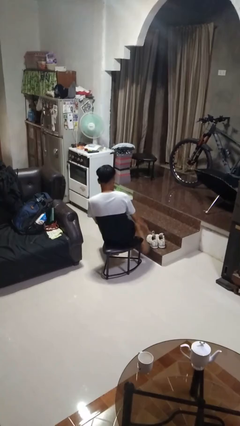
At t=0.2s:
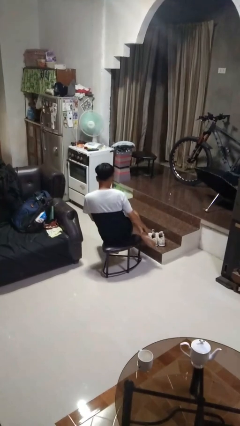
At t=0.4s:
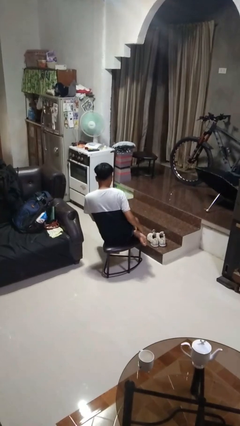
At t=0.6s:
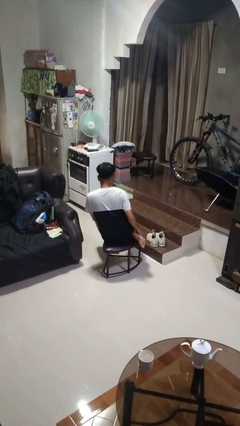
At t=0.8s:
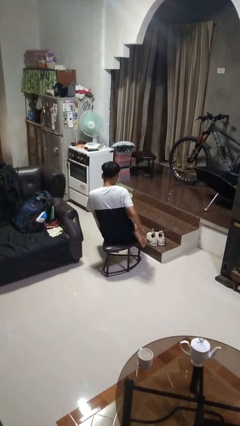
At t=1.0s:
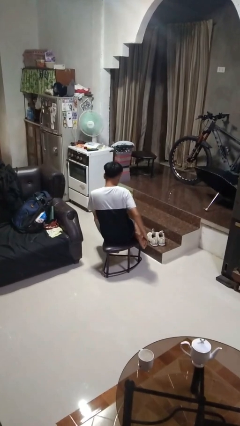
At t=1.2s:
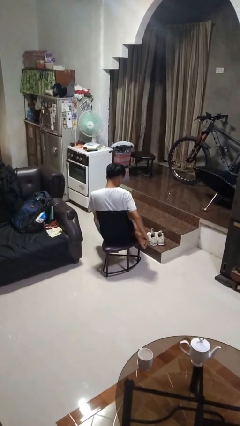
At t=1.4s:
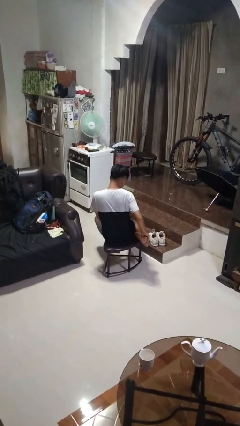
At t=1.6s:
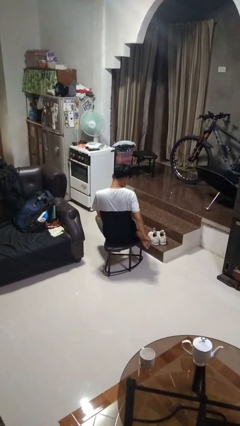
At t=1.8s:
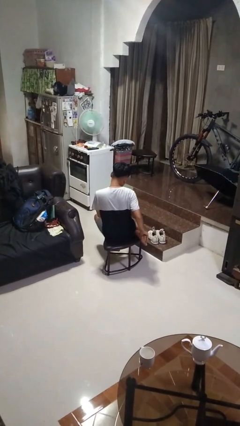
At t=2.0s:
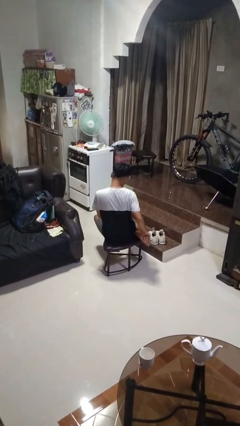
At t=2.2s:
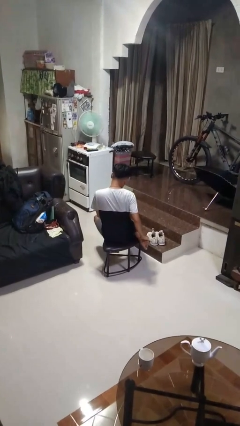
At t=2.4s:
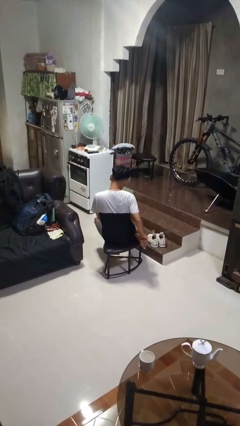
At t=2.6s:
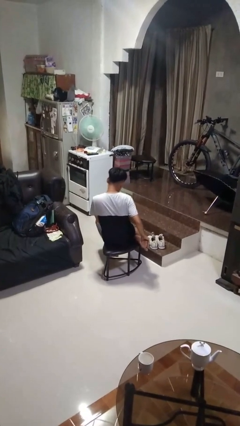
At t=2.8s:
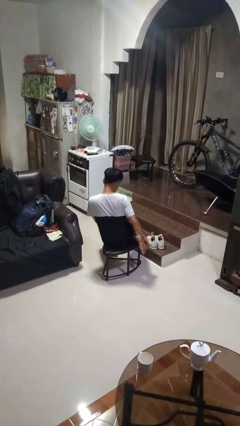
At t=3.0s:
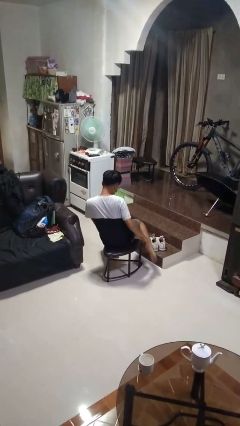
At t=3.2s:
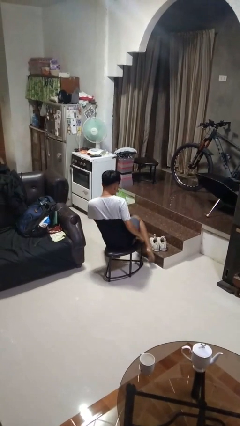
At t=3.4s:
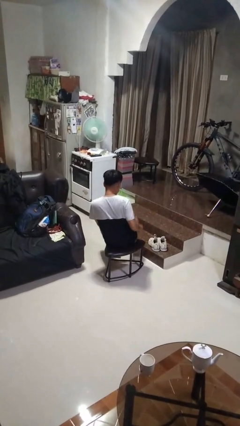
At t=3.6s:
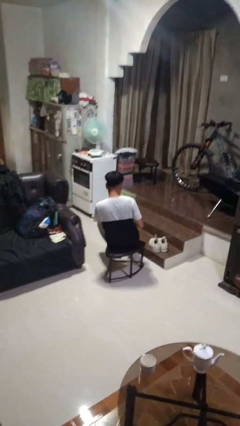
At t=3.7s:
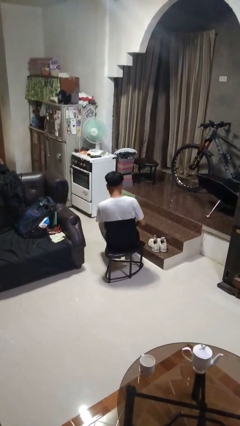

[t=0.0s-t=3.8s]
person rubs foot

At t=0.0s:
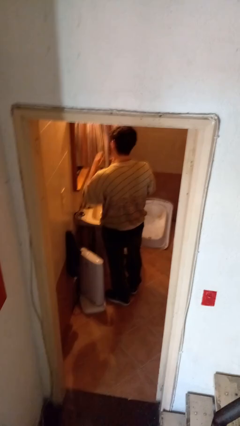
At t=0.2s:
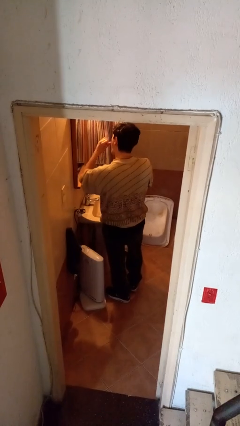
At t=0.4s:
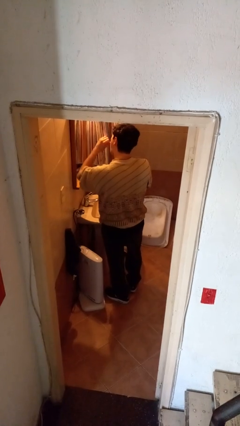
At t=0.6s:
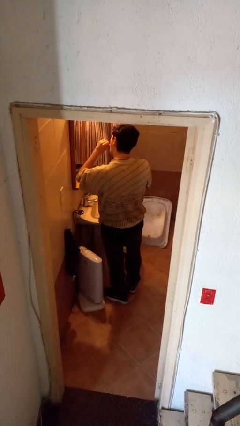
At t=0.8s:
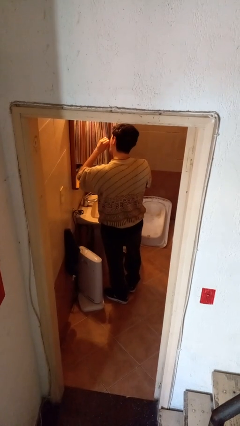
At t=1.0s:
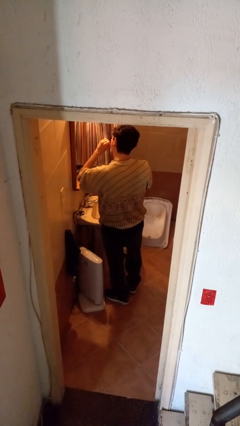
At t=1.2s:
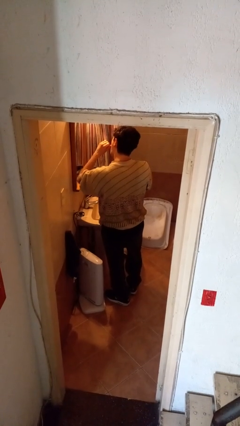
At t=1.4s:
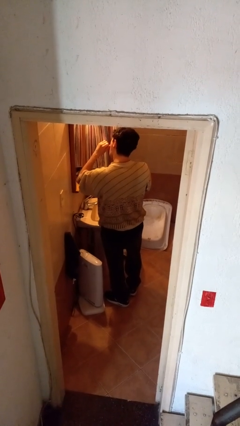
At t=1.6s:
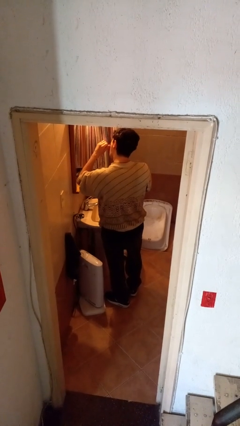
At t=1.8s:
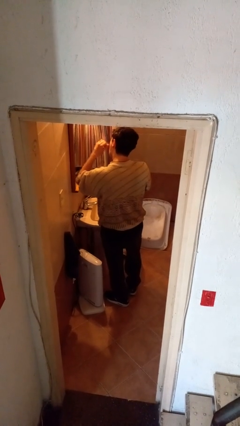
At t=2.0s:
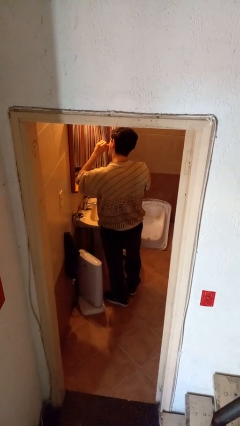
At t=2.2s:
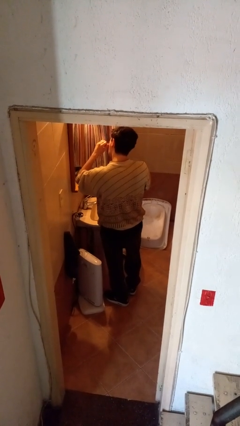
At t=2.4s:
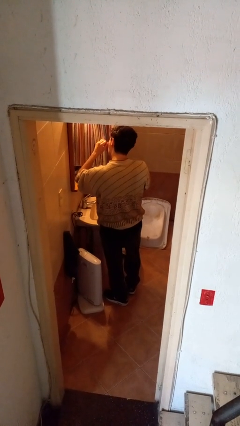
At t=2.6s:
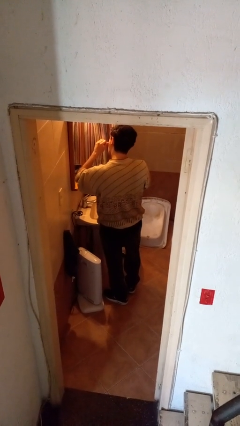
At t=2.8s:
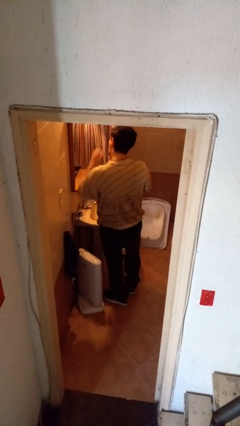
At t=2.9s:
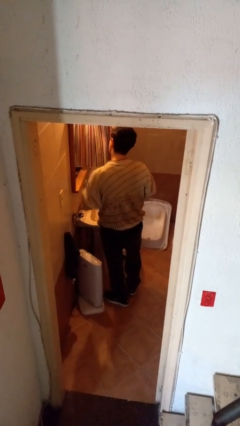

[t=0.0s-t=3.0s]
person flosses

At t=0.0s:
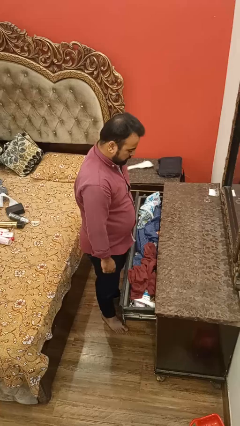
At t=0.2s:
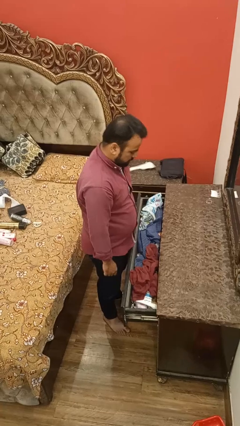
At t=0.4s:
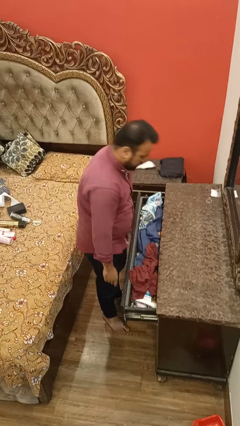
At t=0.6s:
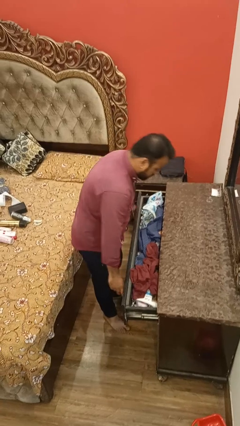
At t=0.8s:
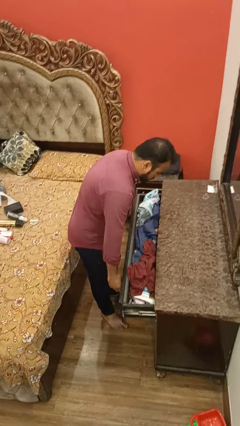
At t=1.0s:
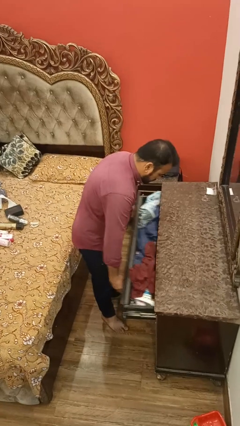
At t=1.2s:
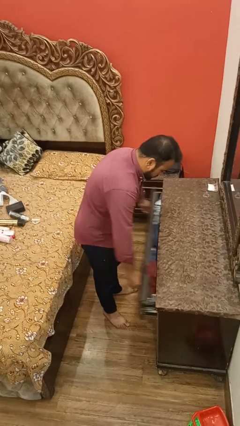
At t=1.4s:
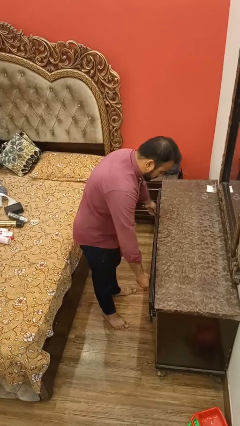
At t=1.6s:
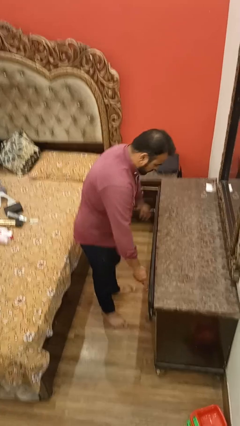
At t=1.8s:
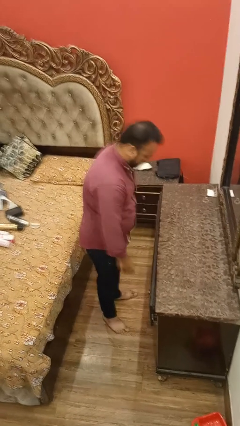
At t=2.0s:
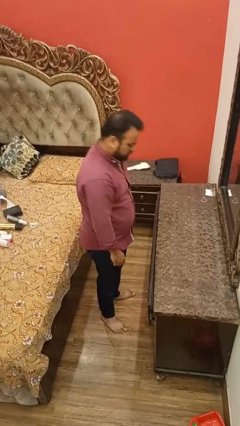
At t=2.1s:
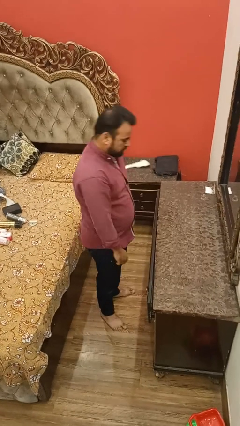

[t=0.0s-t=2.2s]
person closes dresser drawer

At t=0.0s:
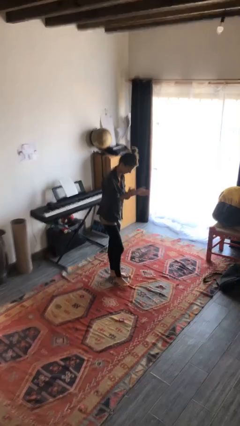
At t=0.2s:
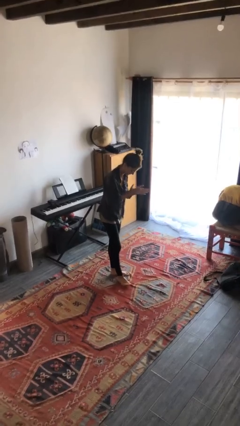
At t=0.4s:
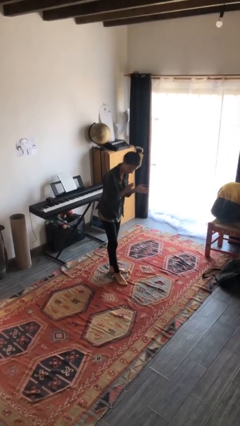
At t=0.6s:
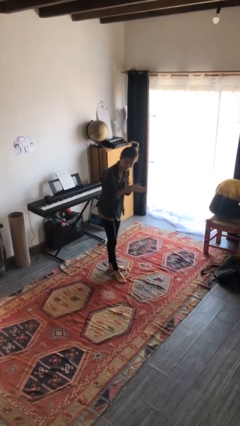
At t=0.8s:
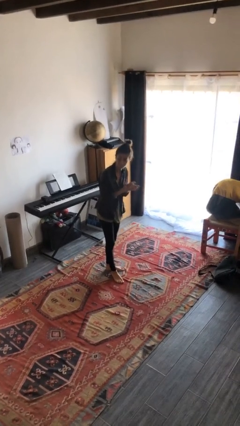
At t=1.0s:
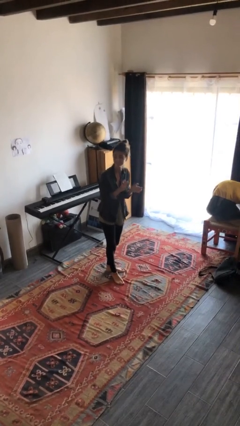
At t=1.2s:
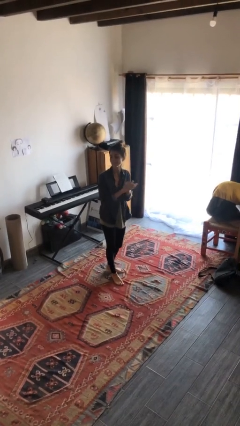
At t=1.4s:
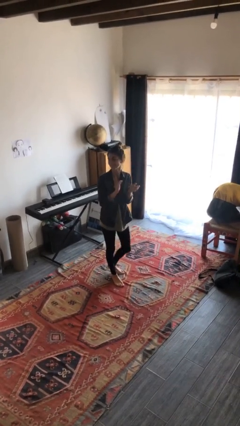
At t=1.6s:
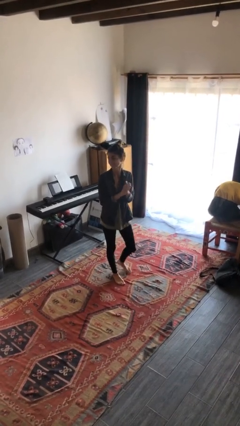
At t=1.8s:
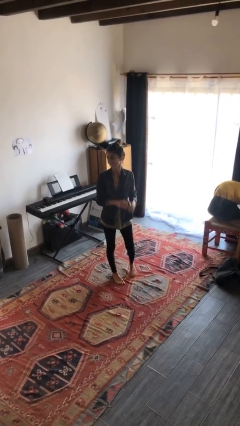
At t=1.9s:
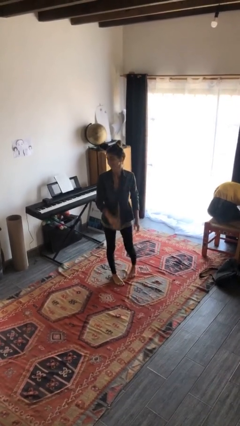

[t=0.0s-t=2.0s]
person claps hands

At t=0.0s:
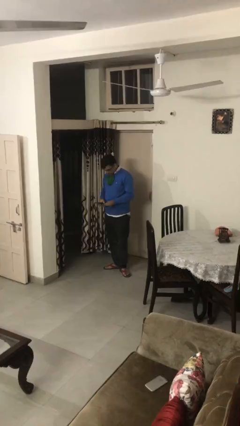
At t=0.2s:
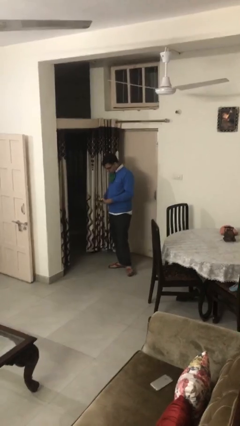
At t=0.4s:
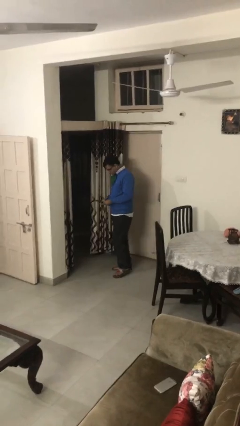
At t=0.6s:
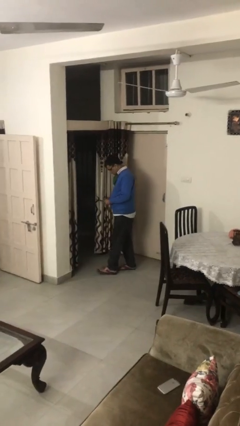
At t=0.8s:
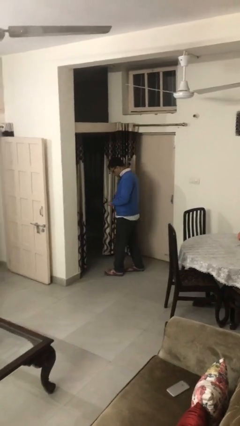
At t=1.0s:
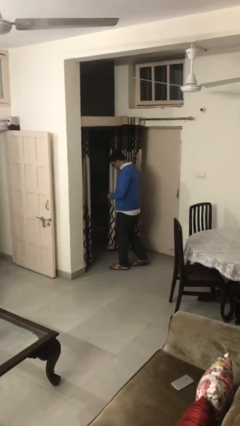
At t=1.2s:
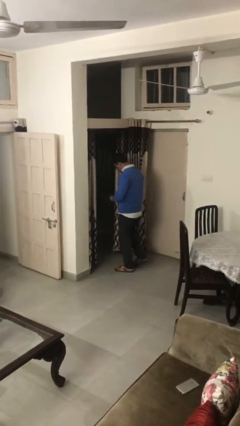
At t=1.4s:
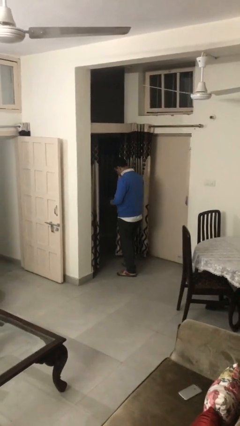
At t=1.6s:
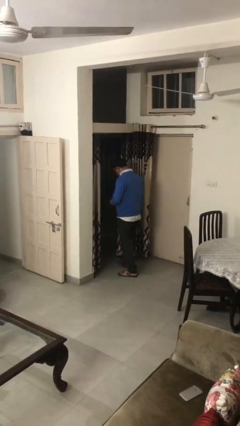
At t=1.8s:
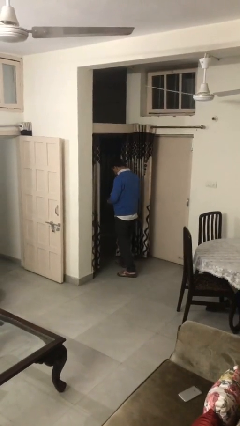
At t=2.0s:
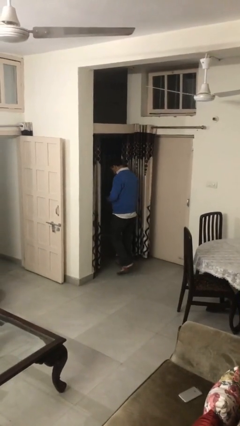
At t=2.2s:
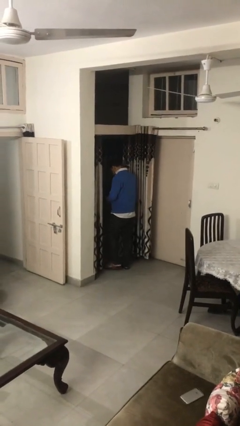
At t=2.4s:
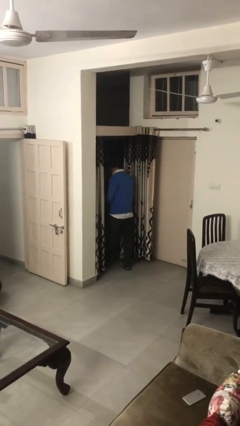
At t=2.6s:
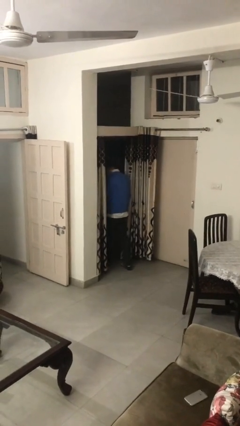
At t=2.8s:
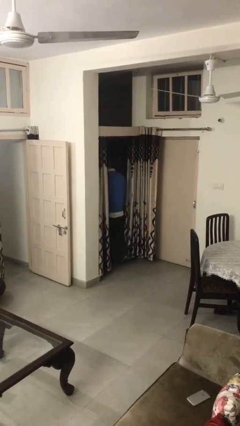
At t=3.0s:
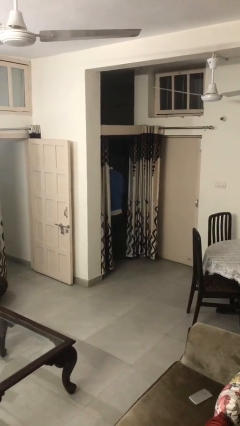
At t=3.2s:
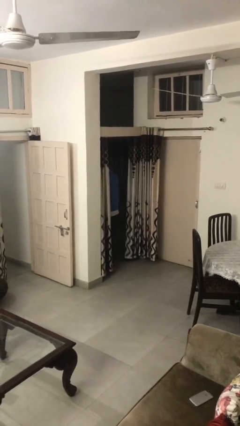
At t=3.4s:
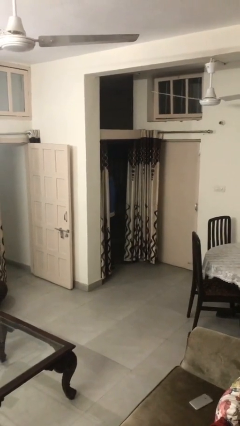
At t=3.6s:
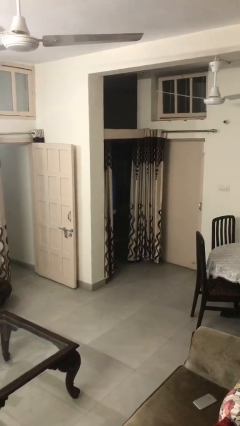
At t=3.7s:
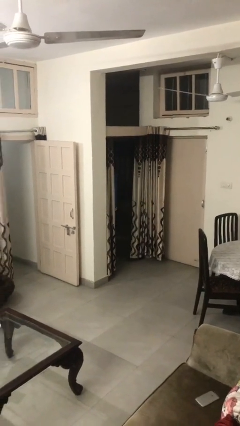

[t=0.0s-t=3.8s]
person exits scene through structure

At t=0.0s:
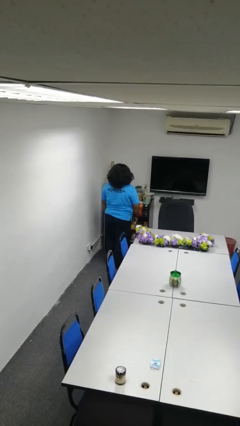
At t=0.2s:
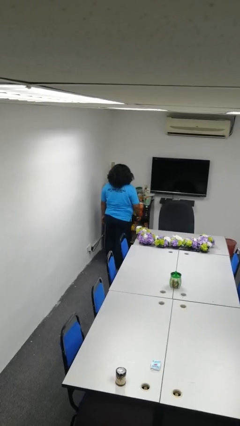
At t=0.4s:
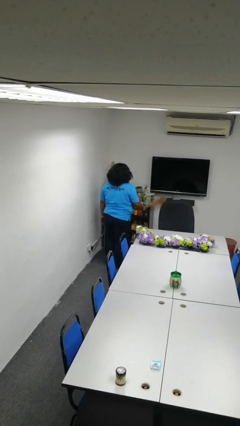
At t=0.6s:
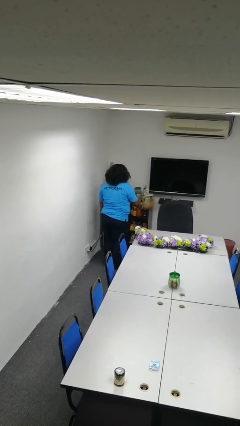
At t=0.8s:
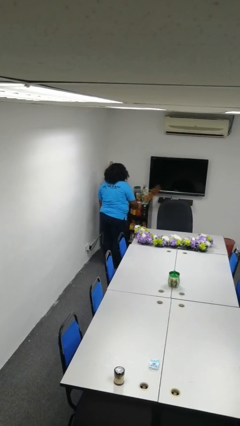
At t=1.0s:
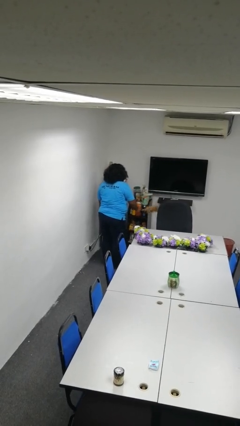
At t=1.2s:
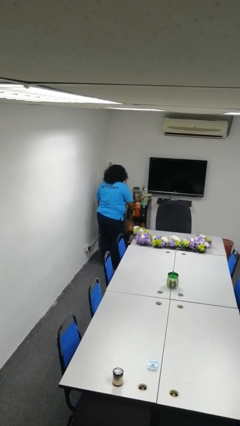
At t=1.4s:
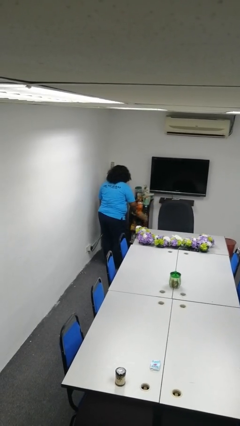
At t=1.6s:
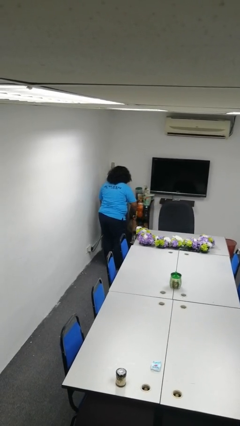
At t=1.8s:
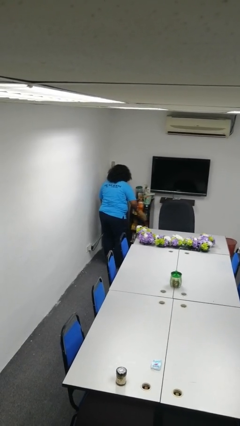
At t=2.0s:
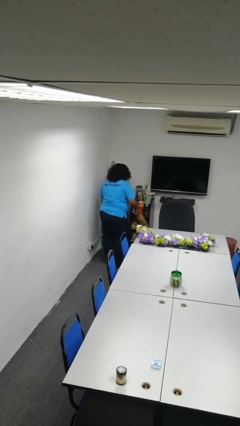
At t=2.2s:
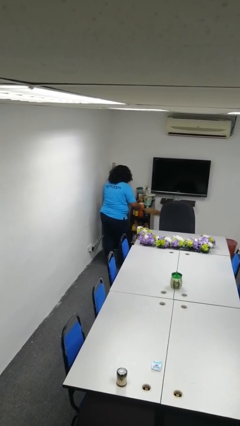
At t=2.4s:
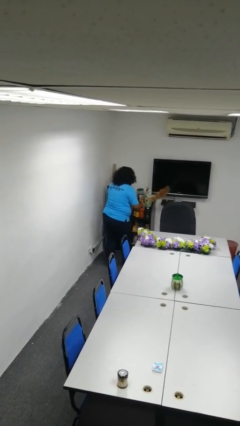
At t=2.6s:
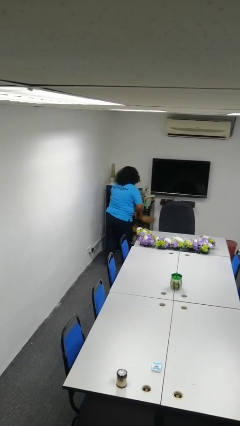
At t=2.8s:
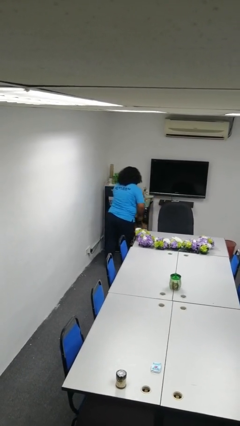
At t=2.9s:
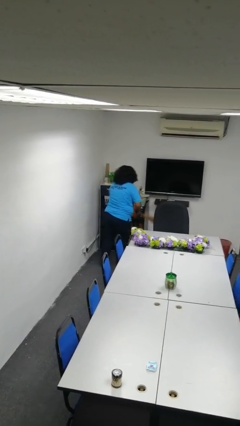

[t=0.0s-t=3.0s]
person dusts furniture
